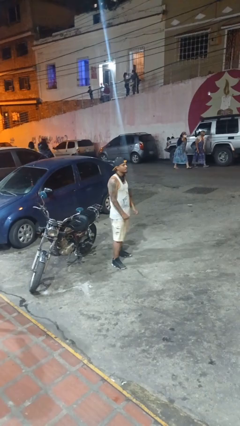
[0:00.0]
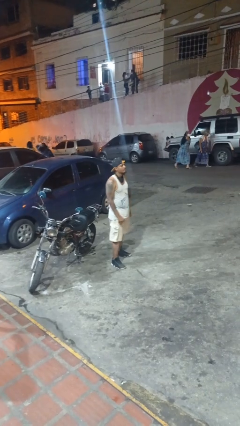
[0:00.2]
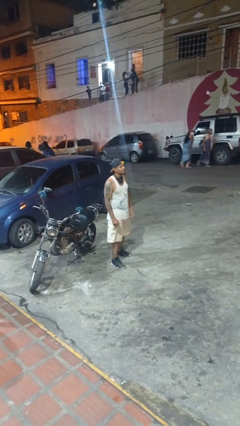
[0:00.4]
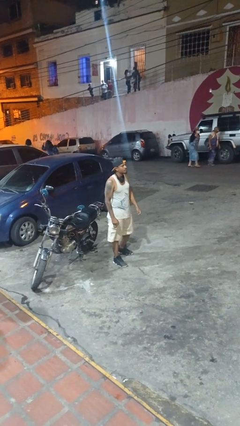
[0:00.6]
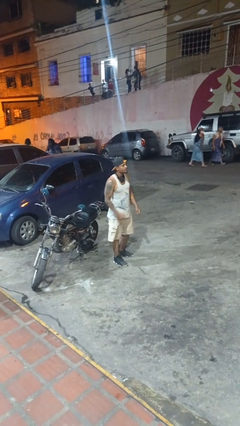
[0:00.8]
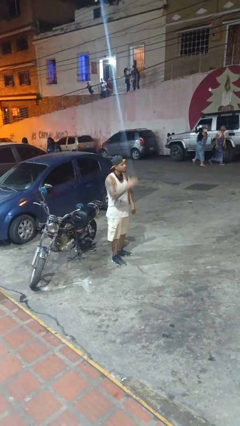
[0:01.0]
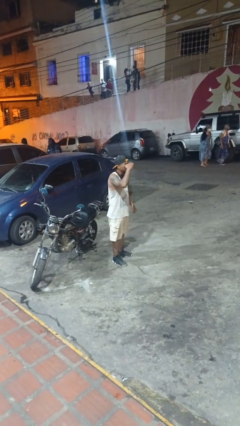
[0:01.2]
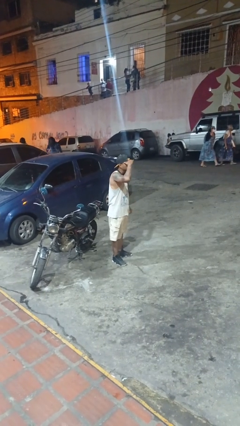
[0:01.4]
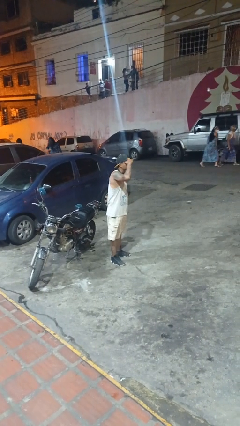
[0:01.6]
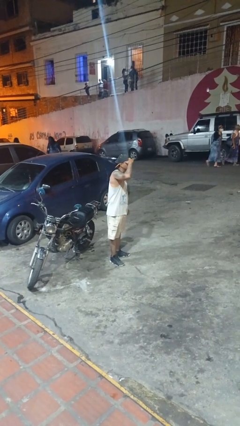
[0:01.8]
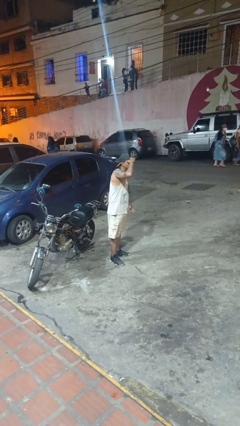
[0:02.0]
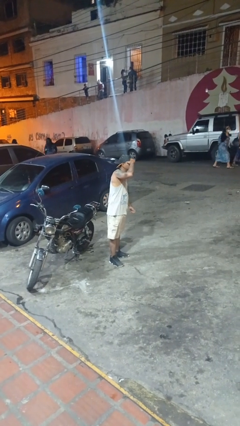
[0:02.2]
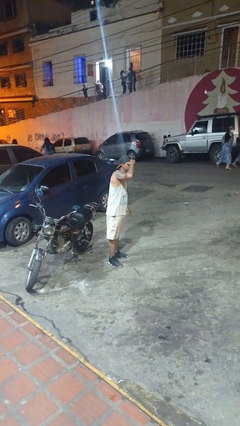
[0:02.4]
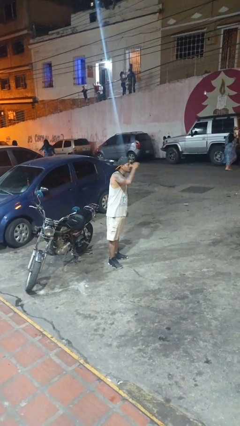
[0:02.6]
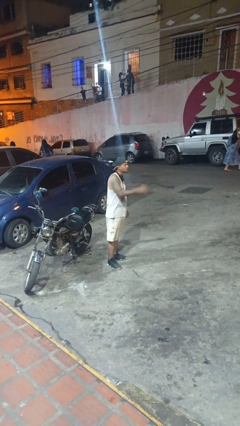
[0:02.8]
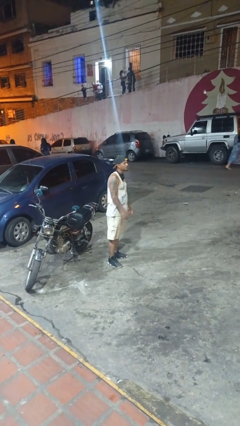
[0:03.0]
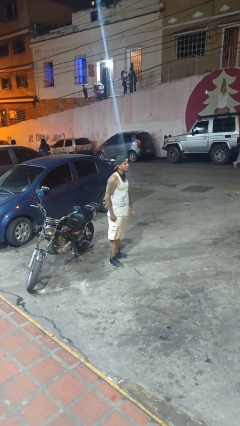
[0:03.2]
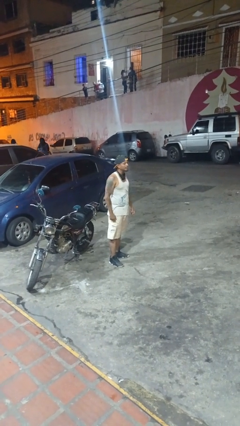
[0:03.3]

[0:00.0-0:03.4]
person shades eyes

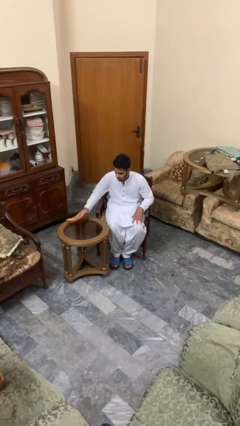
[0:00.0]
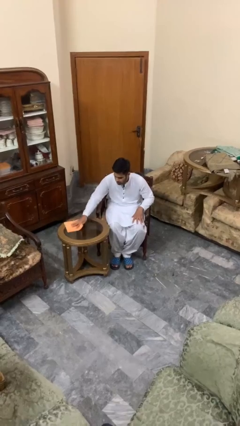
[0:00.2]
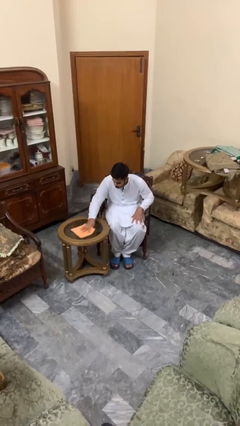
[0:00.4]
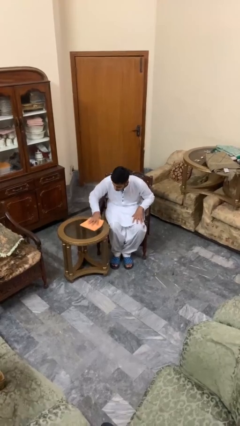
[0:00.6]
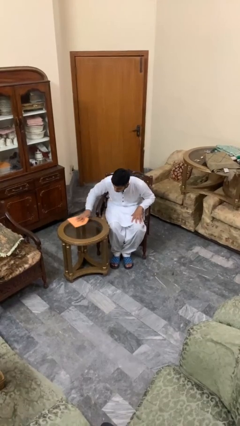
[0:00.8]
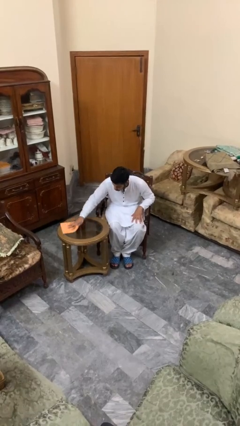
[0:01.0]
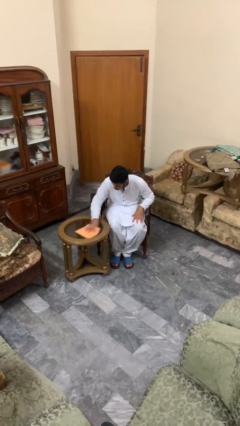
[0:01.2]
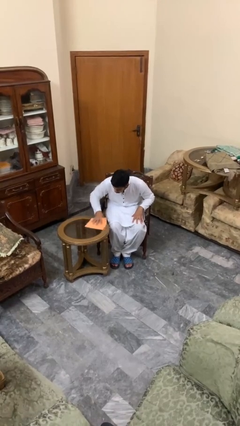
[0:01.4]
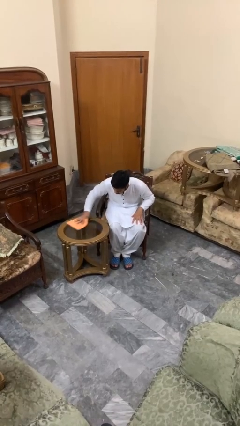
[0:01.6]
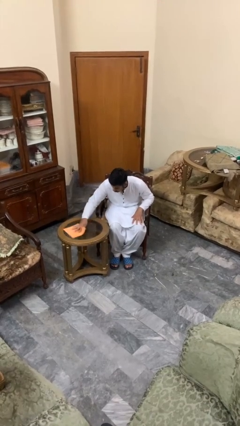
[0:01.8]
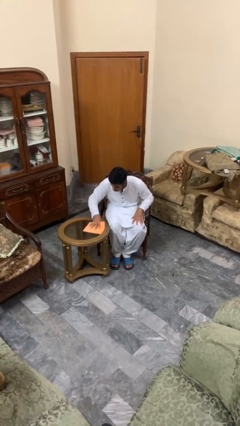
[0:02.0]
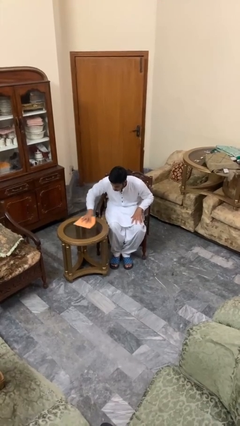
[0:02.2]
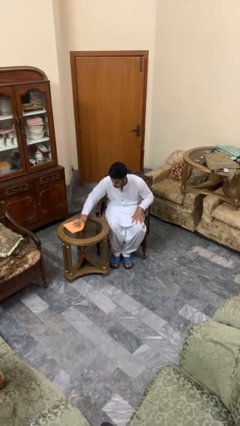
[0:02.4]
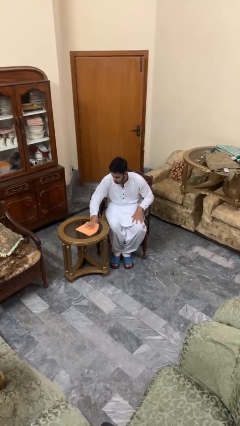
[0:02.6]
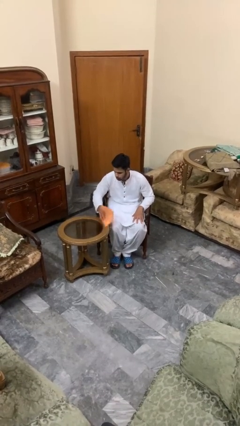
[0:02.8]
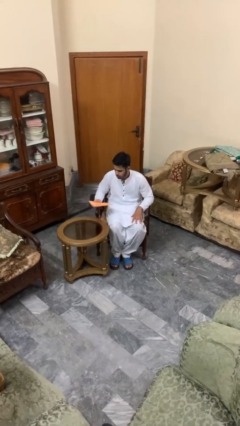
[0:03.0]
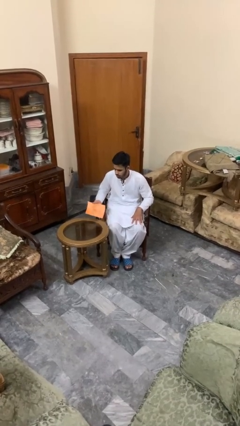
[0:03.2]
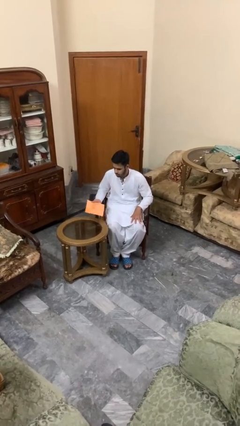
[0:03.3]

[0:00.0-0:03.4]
person cleans table with rag

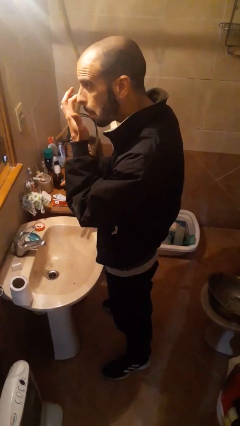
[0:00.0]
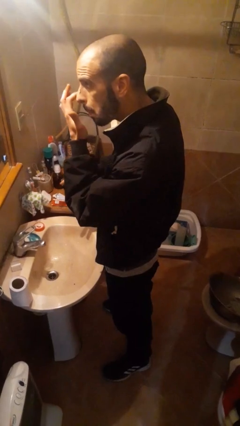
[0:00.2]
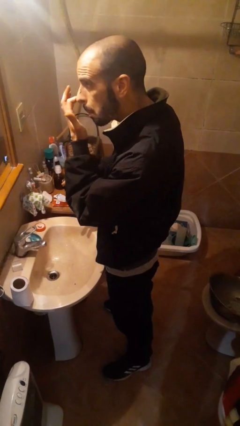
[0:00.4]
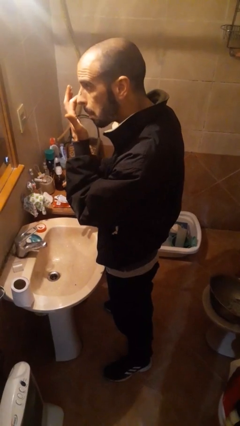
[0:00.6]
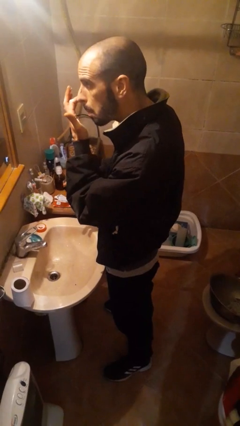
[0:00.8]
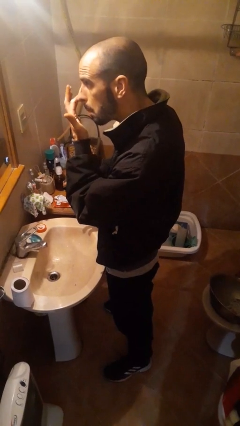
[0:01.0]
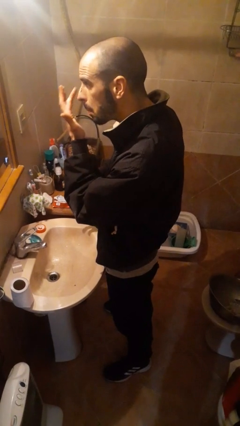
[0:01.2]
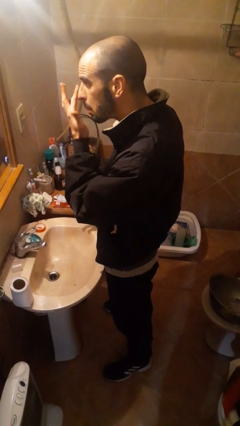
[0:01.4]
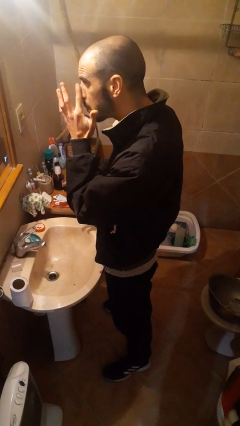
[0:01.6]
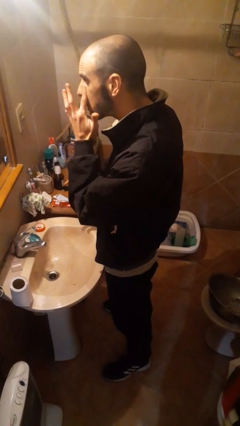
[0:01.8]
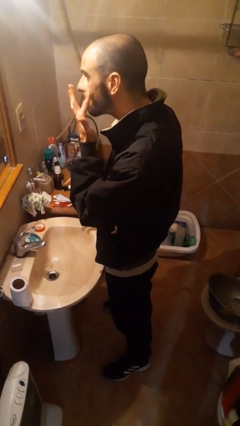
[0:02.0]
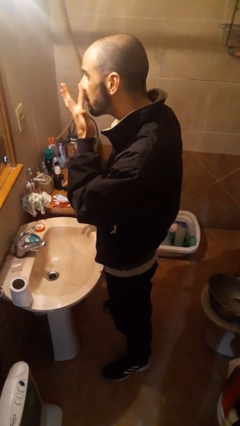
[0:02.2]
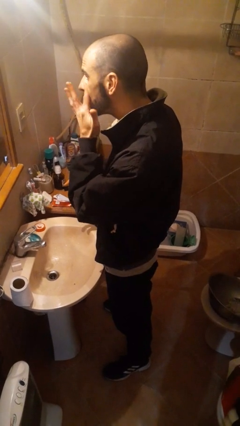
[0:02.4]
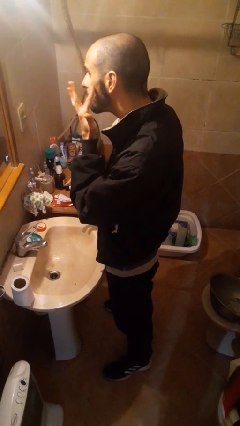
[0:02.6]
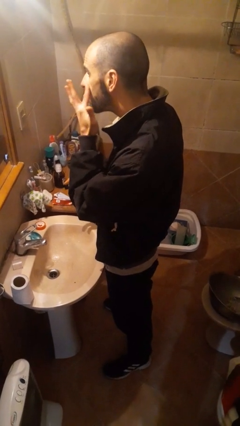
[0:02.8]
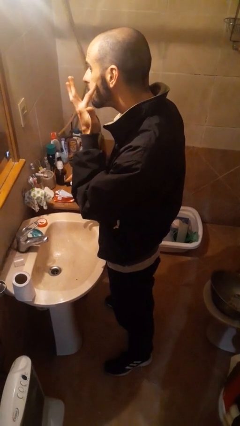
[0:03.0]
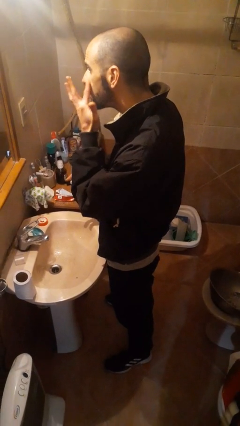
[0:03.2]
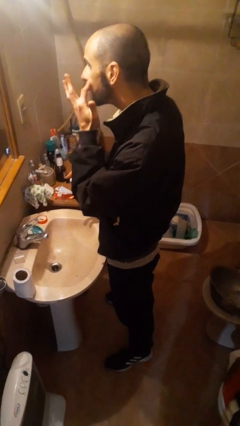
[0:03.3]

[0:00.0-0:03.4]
person applies foundation makeup

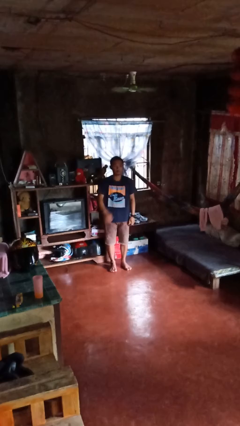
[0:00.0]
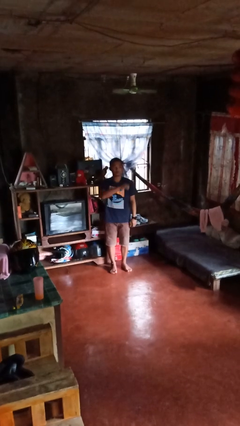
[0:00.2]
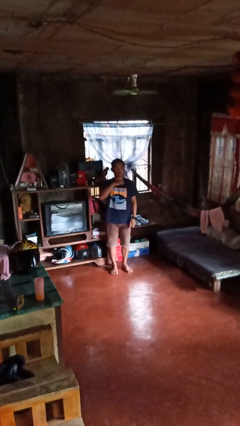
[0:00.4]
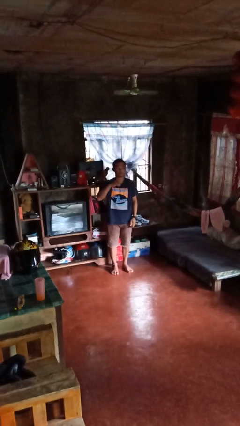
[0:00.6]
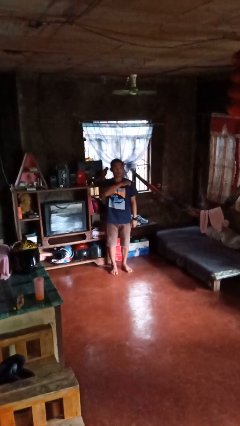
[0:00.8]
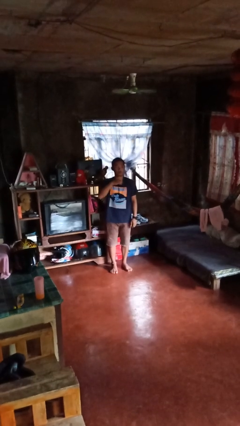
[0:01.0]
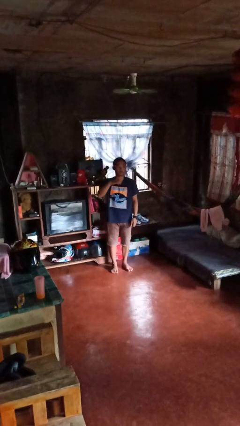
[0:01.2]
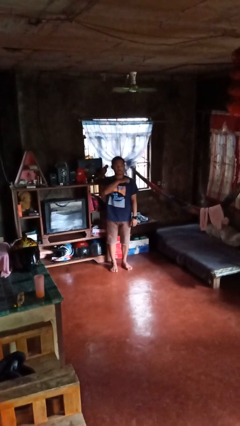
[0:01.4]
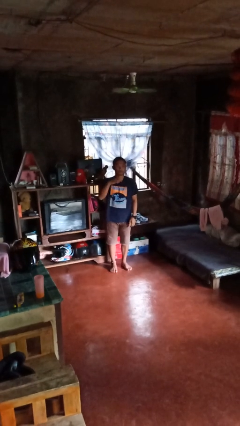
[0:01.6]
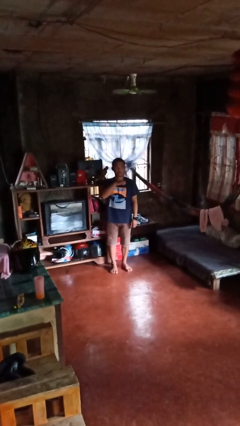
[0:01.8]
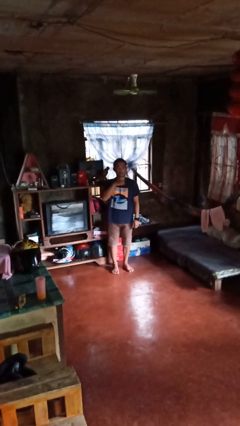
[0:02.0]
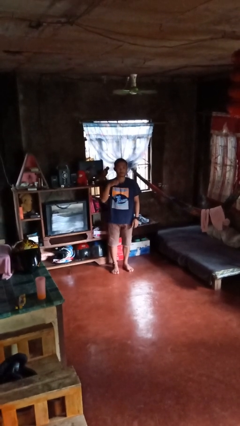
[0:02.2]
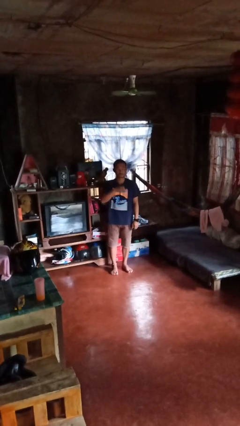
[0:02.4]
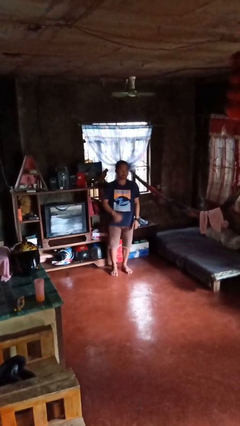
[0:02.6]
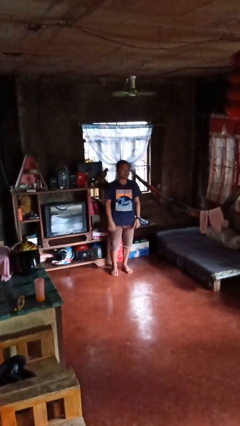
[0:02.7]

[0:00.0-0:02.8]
person gestures cut

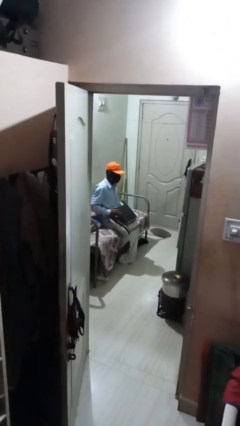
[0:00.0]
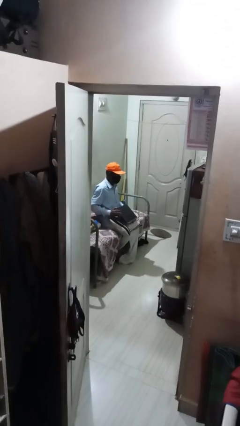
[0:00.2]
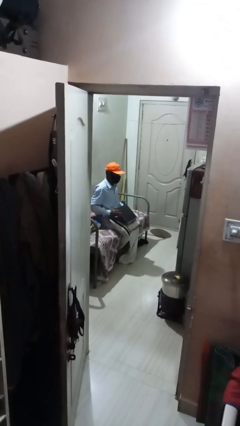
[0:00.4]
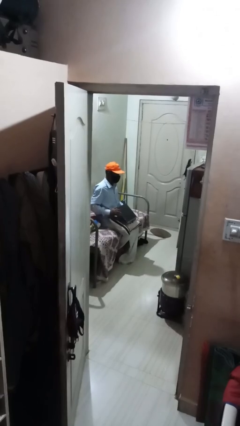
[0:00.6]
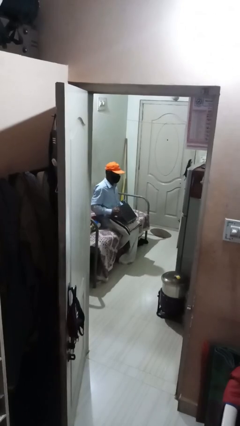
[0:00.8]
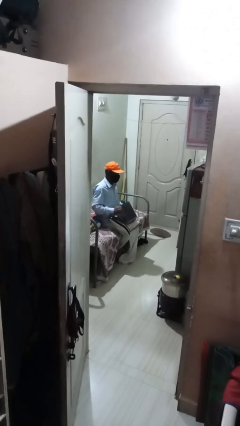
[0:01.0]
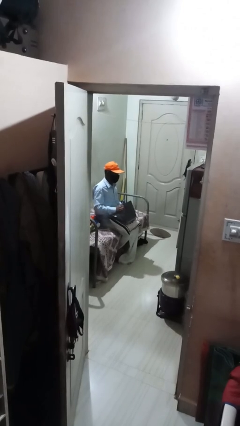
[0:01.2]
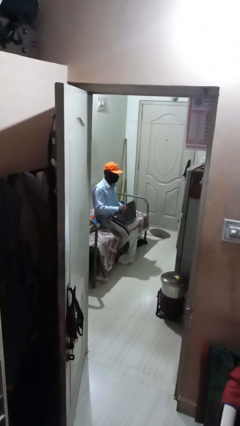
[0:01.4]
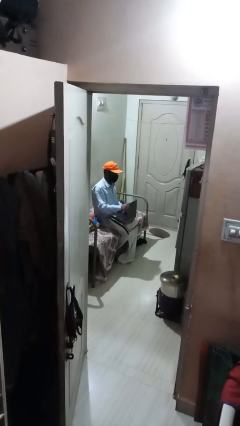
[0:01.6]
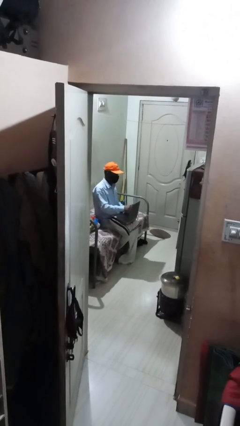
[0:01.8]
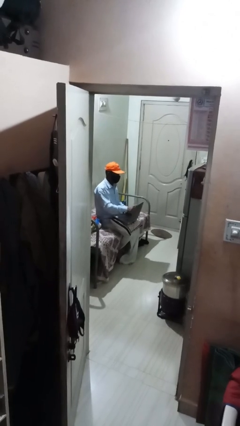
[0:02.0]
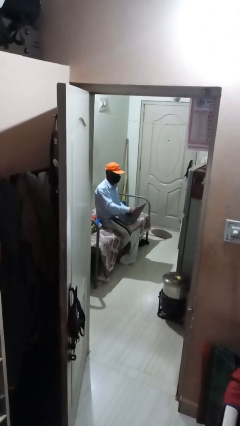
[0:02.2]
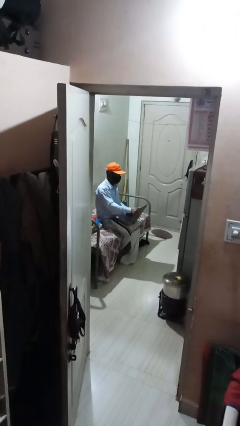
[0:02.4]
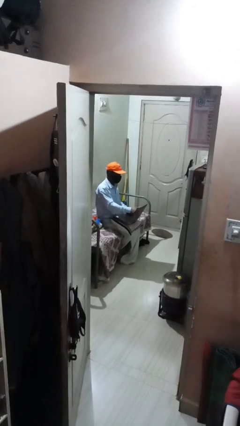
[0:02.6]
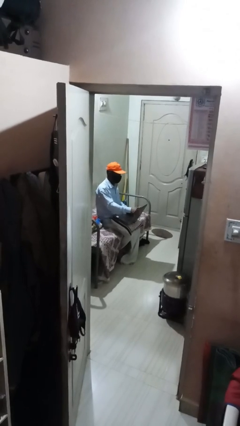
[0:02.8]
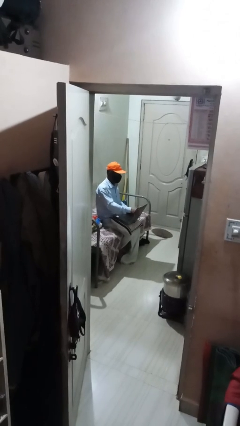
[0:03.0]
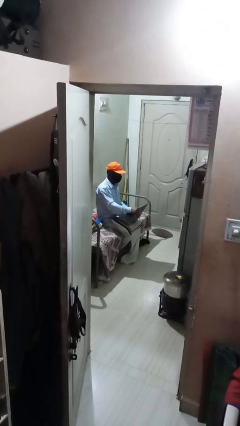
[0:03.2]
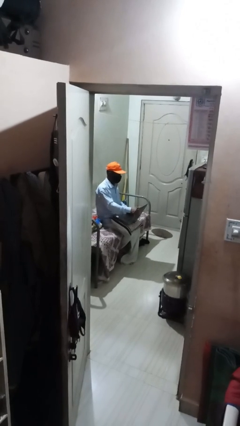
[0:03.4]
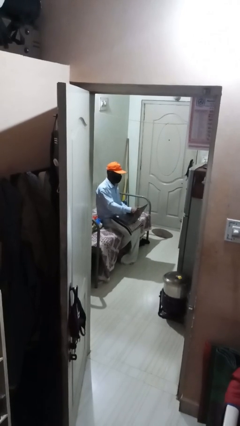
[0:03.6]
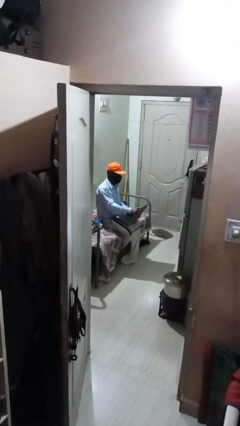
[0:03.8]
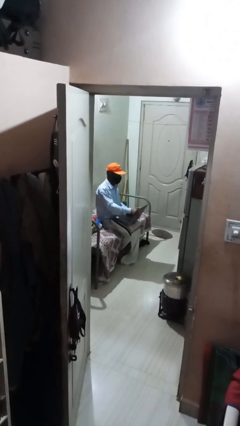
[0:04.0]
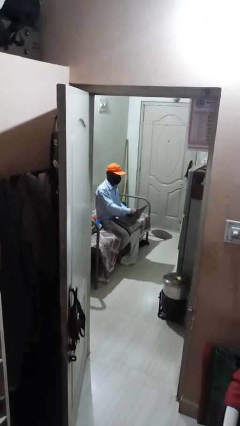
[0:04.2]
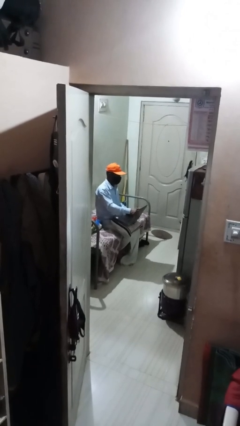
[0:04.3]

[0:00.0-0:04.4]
person interacts with laptop
